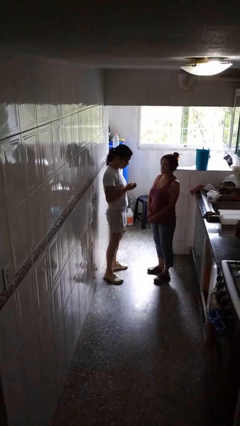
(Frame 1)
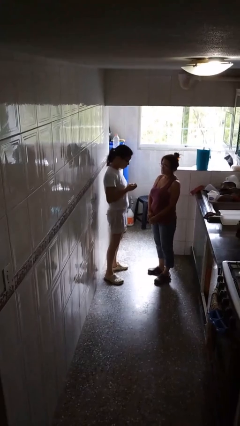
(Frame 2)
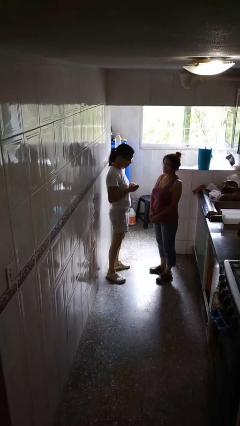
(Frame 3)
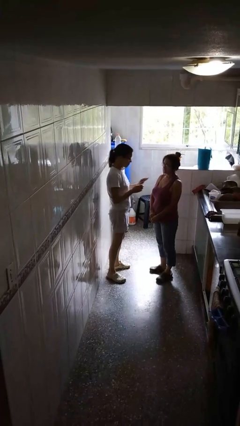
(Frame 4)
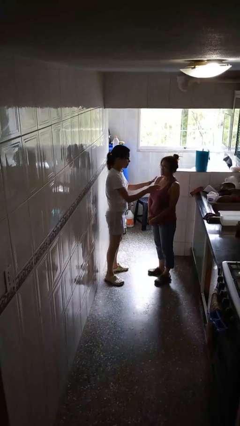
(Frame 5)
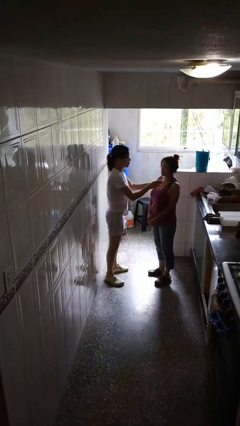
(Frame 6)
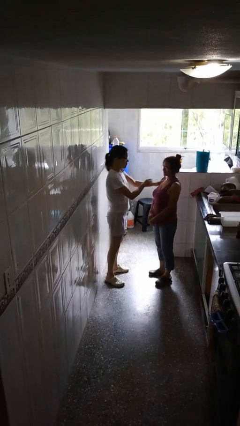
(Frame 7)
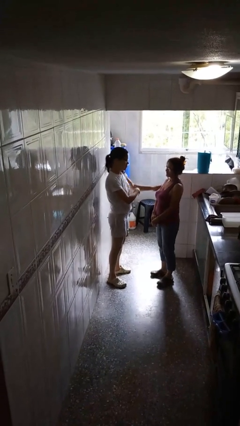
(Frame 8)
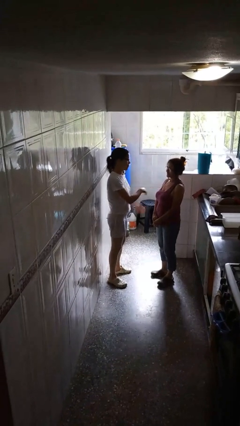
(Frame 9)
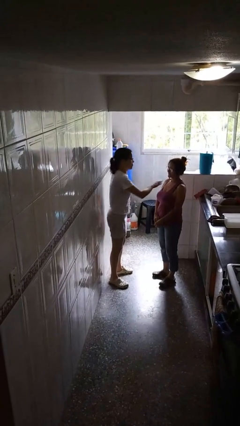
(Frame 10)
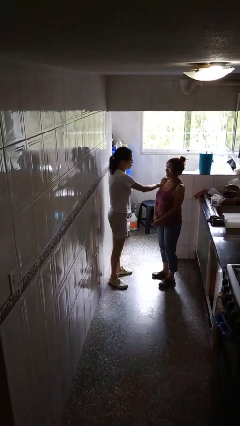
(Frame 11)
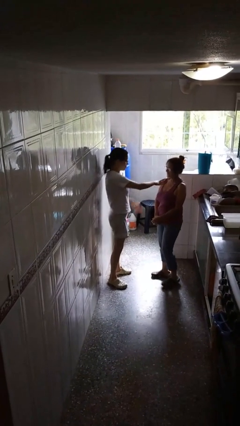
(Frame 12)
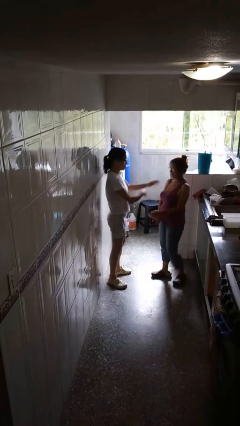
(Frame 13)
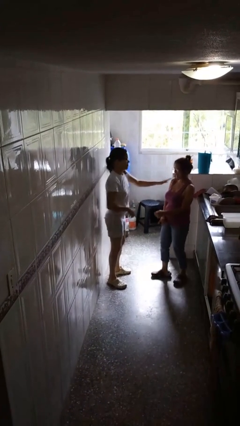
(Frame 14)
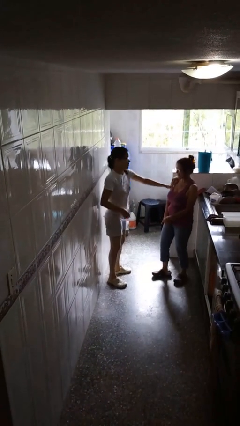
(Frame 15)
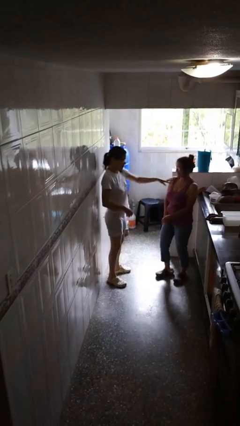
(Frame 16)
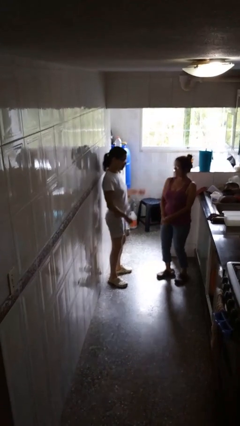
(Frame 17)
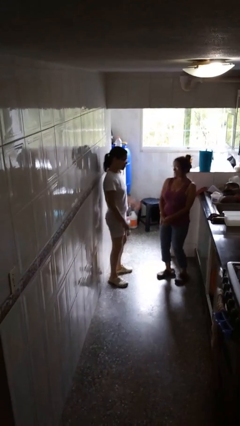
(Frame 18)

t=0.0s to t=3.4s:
person shoves person

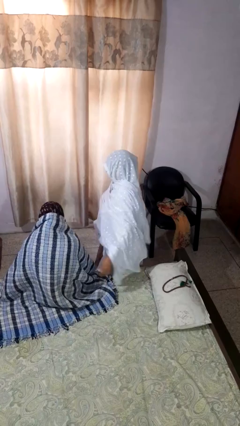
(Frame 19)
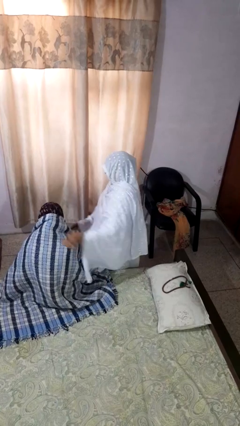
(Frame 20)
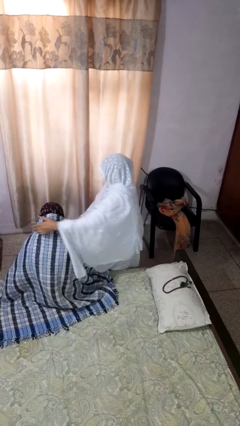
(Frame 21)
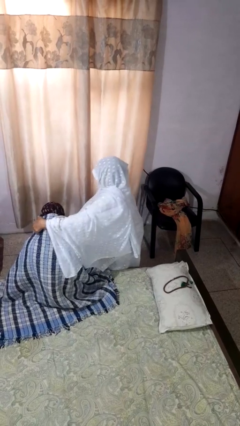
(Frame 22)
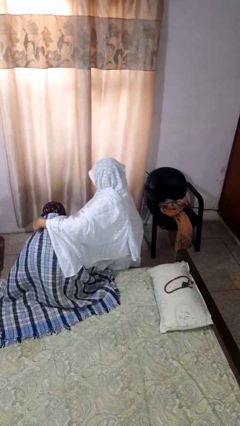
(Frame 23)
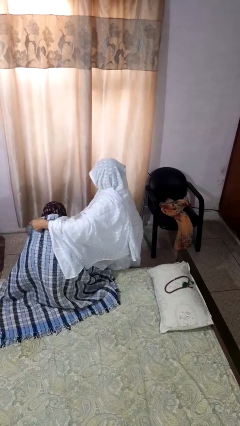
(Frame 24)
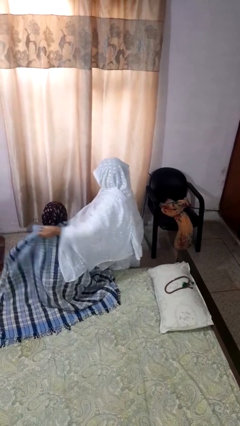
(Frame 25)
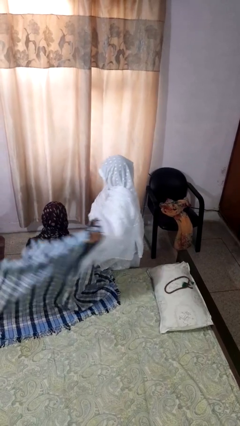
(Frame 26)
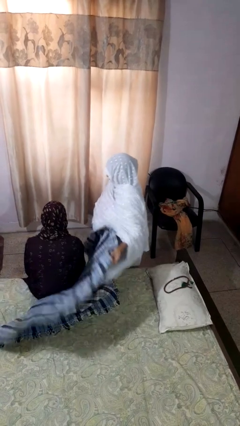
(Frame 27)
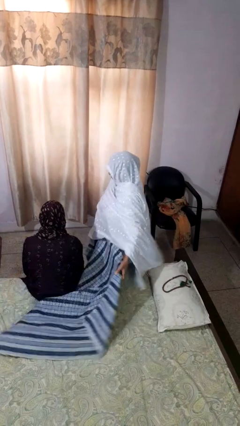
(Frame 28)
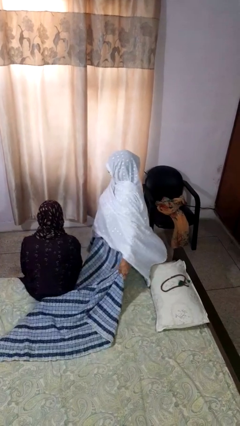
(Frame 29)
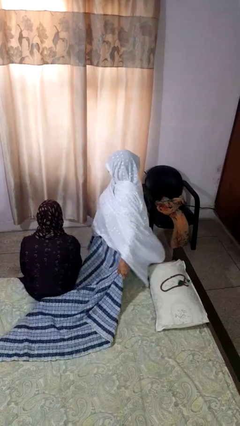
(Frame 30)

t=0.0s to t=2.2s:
person uncovers friend with blanket

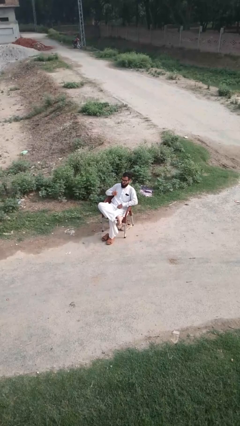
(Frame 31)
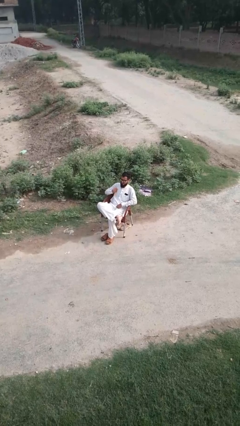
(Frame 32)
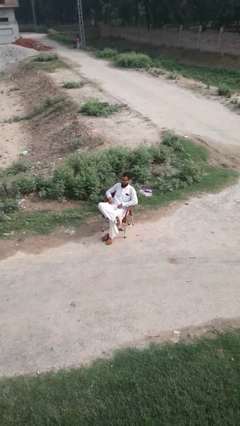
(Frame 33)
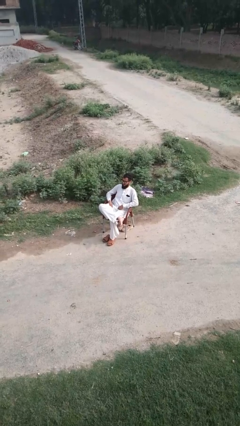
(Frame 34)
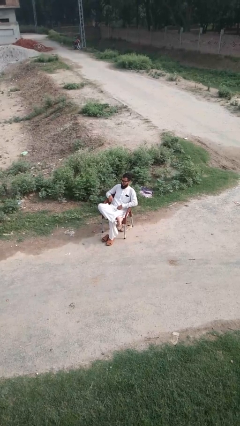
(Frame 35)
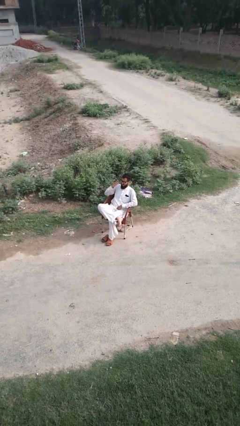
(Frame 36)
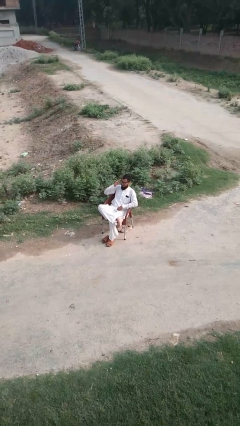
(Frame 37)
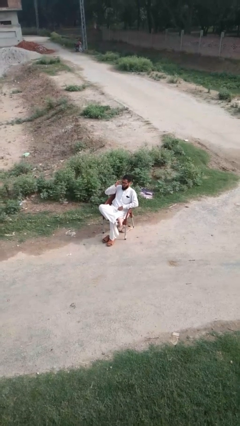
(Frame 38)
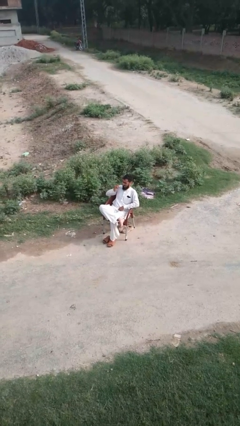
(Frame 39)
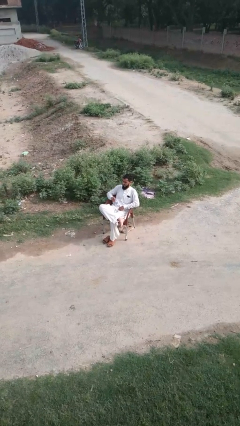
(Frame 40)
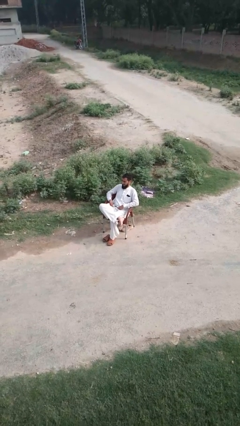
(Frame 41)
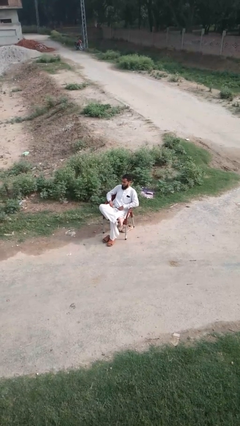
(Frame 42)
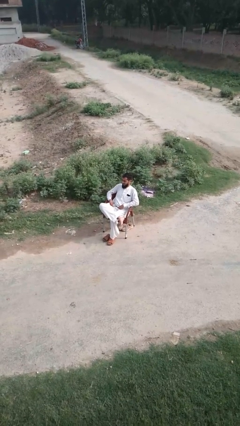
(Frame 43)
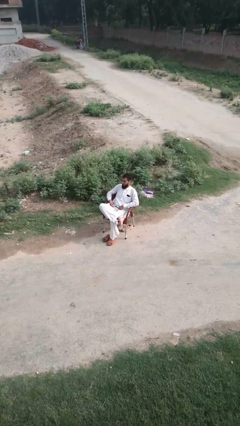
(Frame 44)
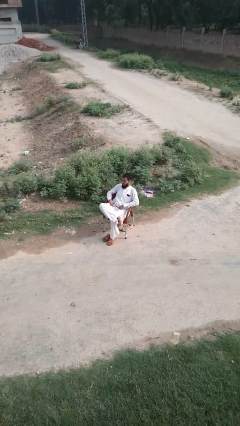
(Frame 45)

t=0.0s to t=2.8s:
person takes off glasses

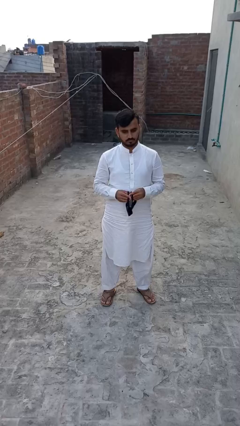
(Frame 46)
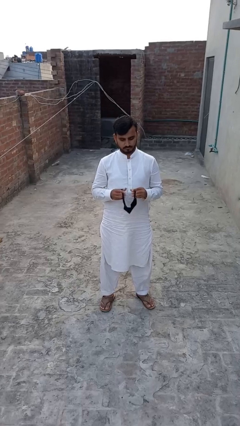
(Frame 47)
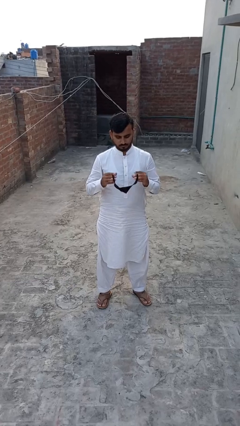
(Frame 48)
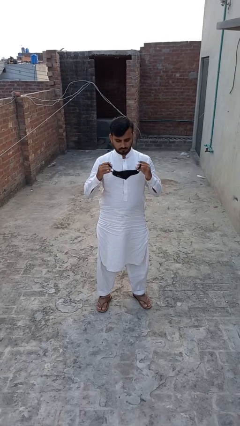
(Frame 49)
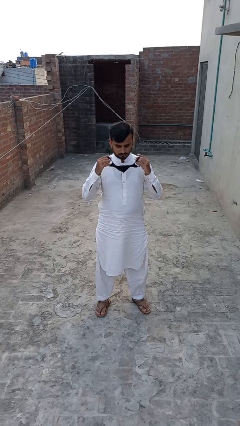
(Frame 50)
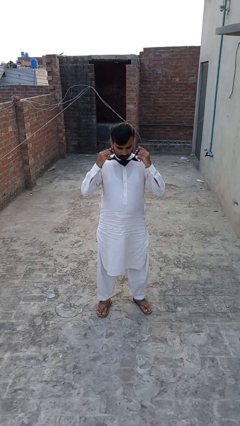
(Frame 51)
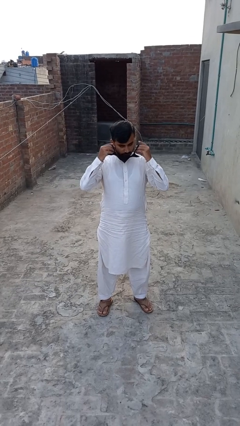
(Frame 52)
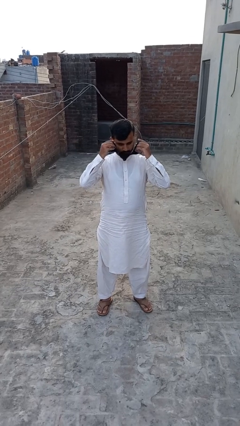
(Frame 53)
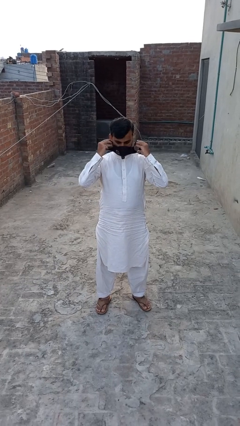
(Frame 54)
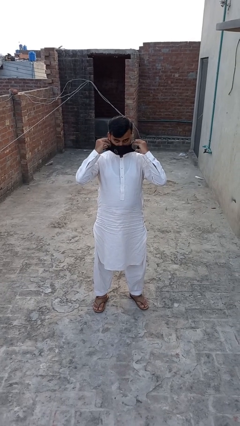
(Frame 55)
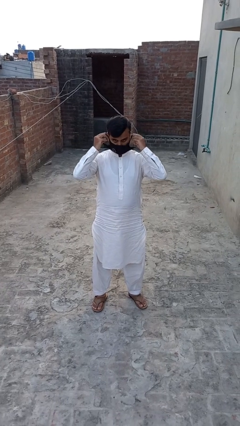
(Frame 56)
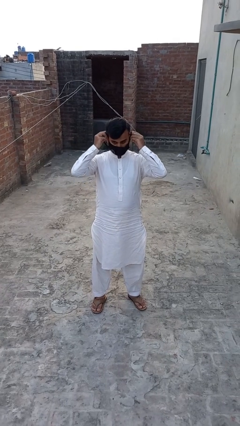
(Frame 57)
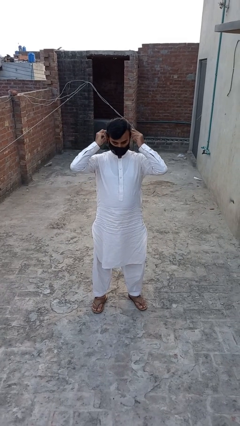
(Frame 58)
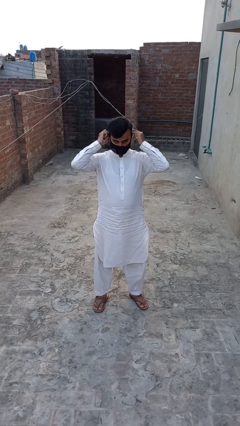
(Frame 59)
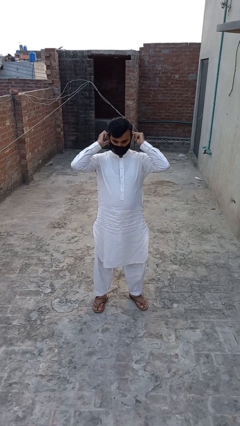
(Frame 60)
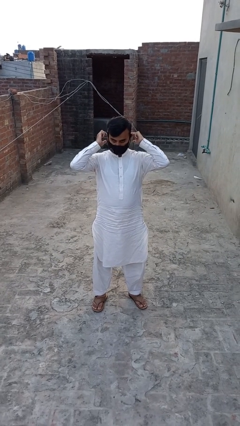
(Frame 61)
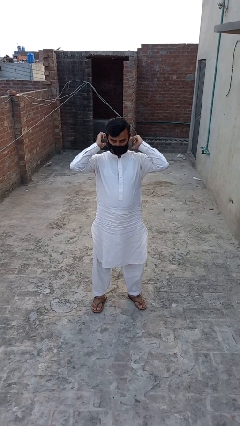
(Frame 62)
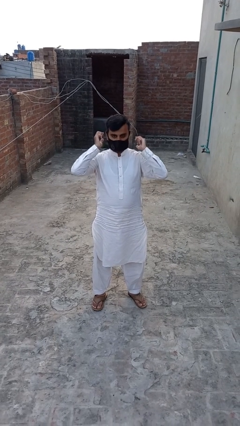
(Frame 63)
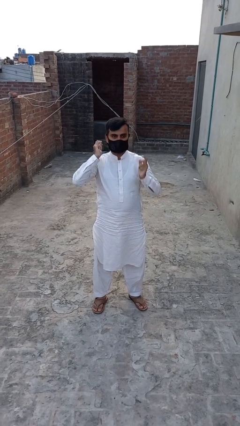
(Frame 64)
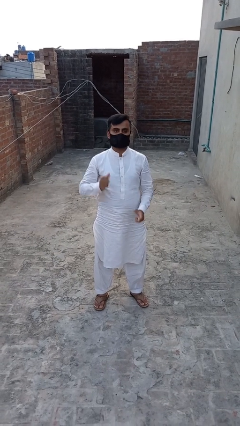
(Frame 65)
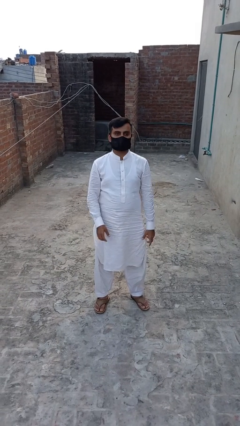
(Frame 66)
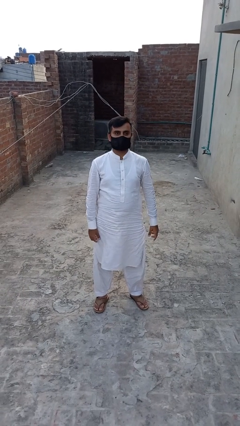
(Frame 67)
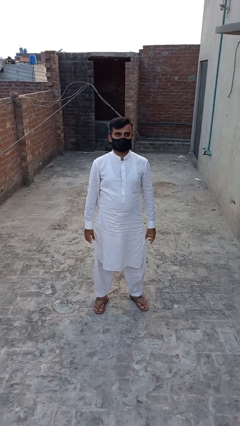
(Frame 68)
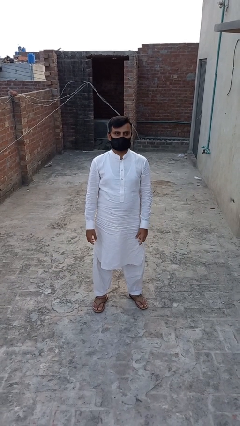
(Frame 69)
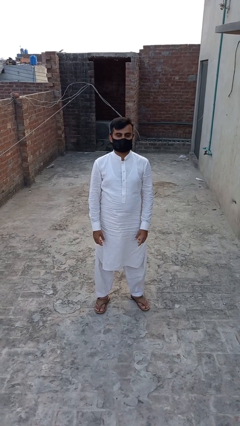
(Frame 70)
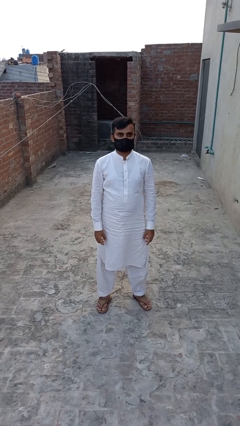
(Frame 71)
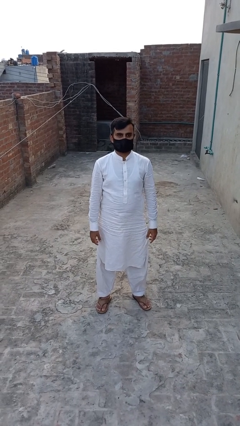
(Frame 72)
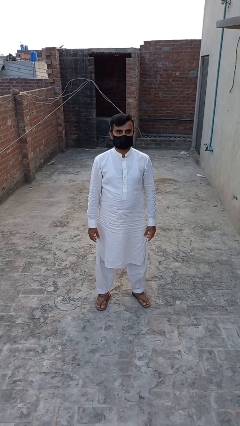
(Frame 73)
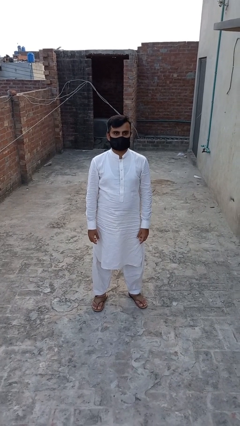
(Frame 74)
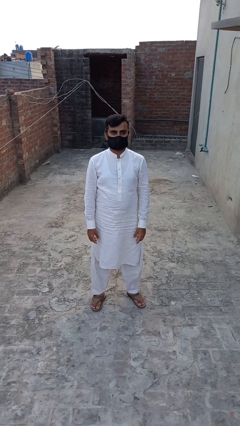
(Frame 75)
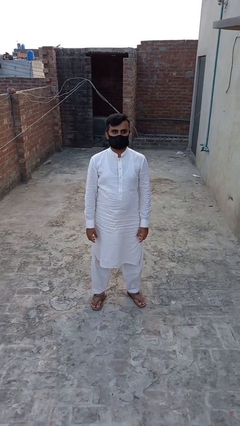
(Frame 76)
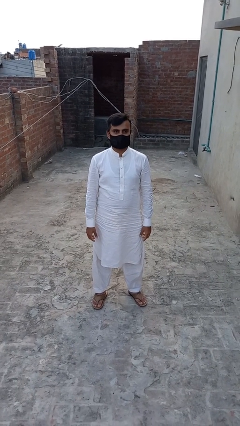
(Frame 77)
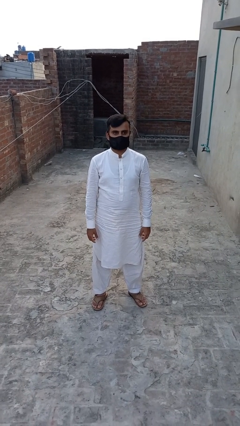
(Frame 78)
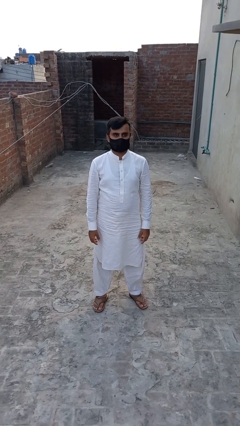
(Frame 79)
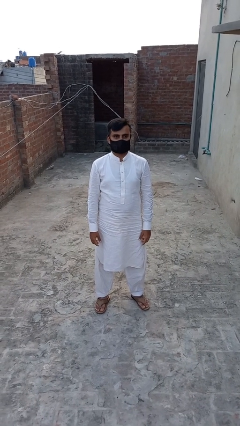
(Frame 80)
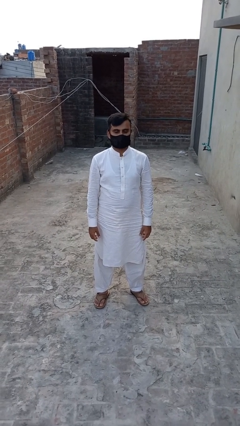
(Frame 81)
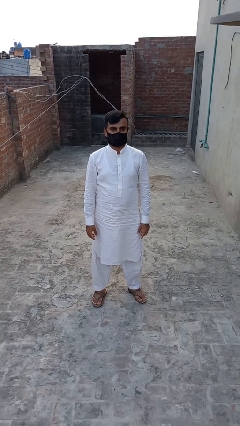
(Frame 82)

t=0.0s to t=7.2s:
person puts on facemask

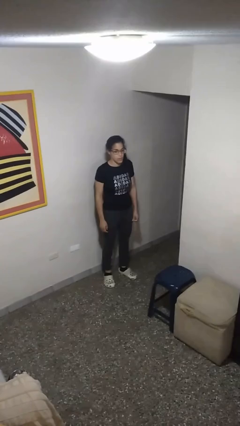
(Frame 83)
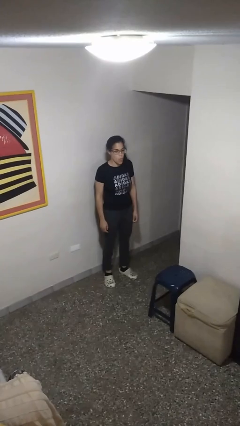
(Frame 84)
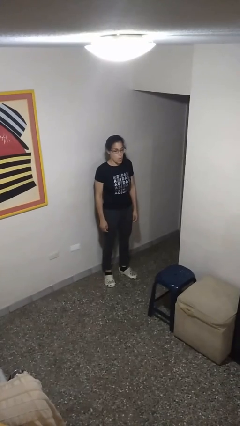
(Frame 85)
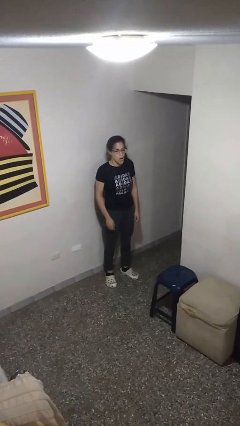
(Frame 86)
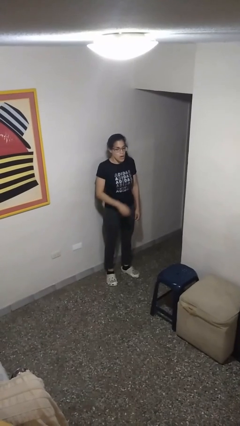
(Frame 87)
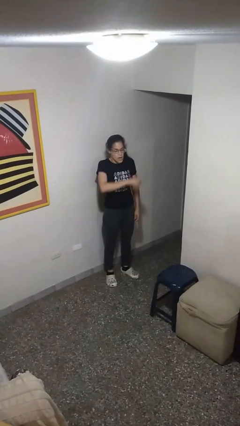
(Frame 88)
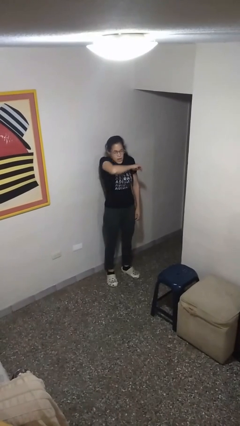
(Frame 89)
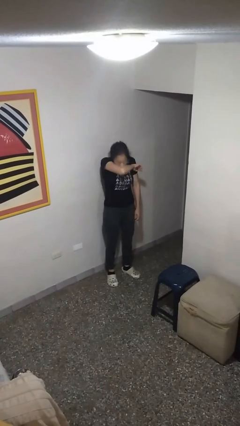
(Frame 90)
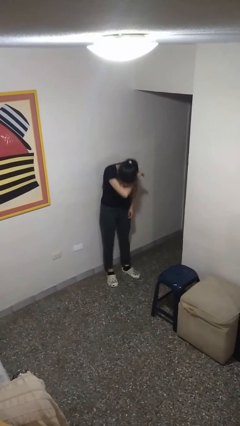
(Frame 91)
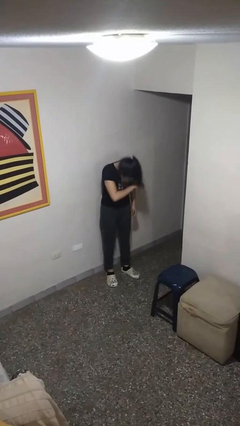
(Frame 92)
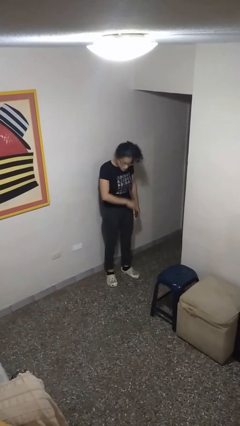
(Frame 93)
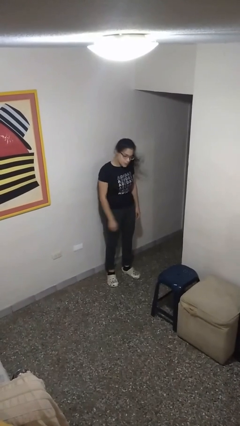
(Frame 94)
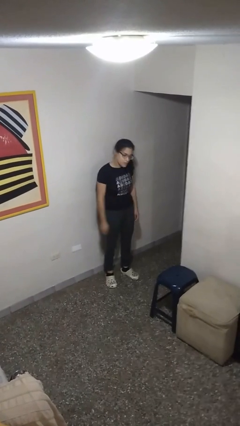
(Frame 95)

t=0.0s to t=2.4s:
person sneezes into arm
